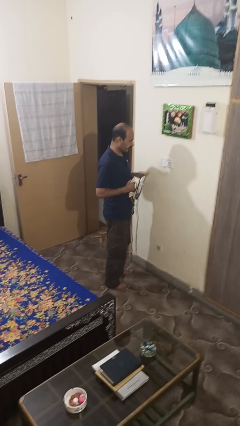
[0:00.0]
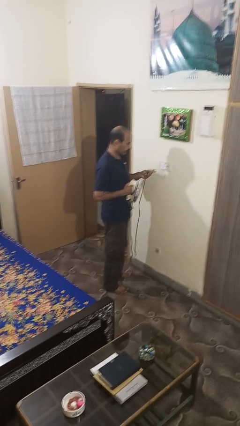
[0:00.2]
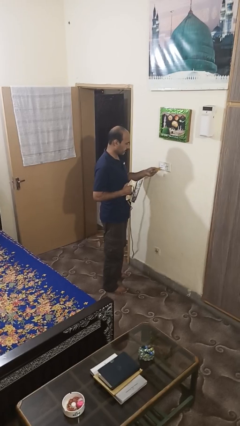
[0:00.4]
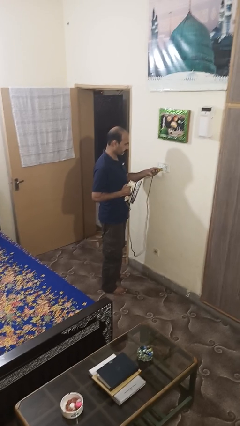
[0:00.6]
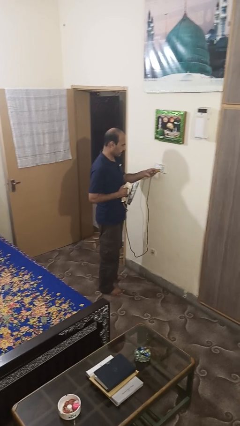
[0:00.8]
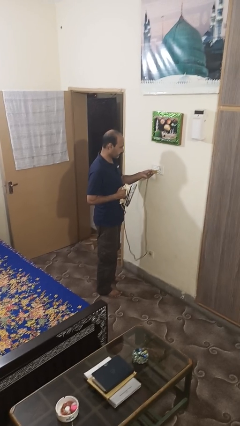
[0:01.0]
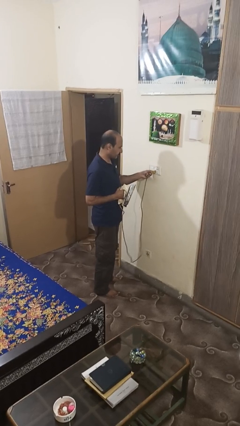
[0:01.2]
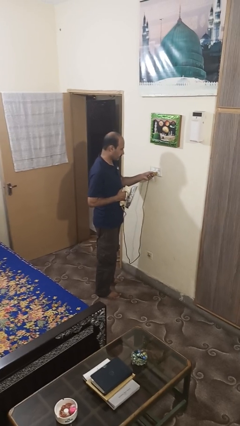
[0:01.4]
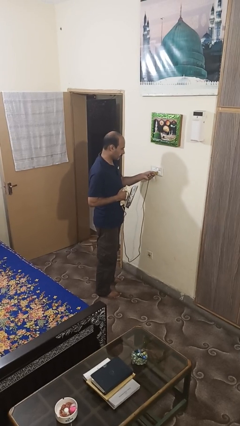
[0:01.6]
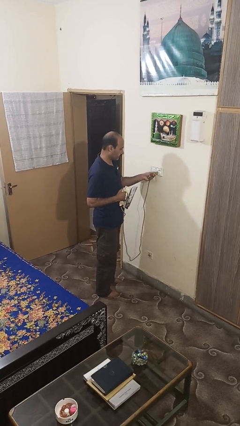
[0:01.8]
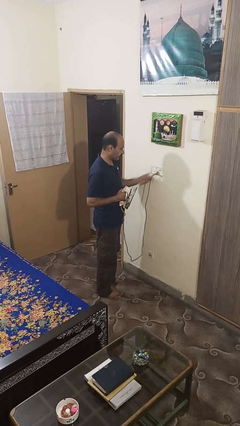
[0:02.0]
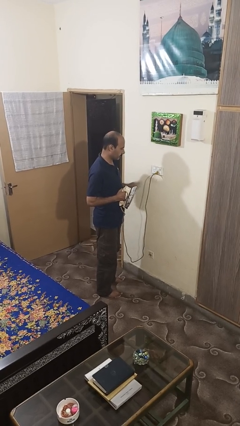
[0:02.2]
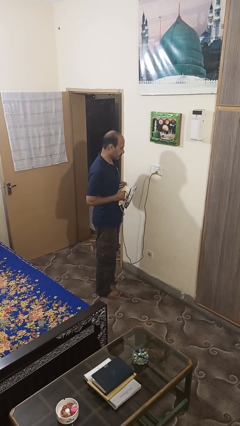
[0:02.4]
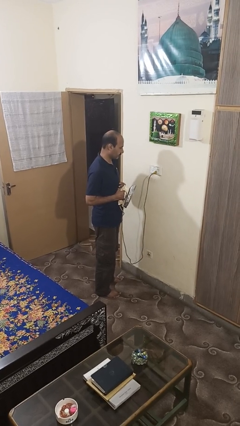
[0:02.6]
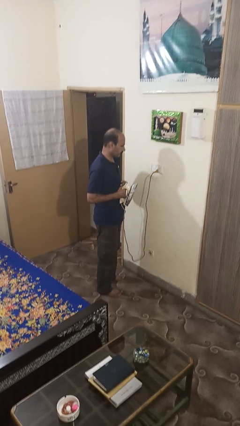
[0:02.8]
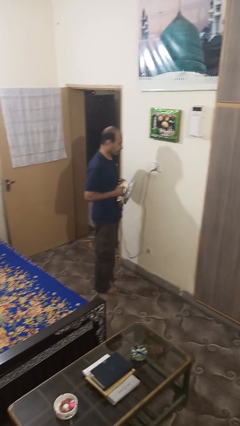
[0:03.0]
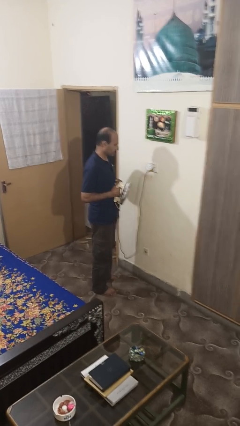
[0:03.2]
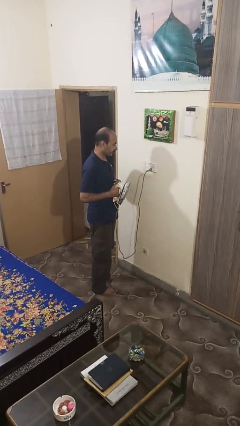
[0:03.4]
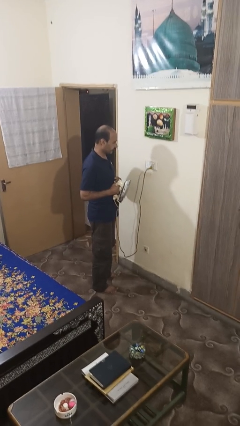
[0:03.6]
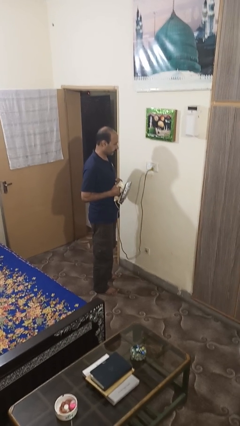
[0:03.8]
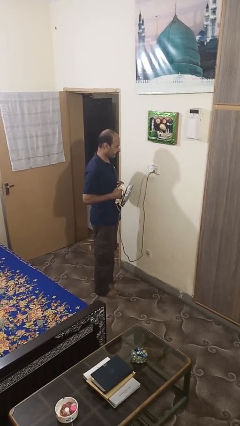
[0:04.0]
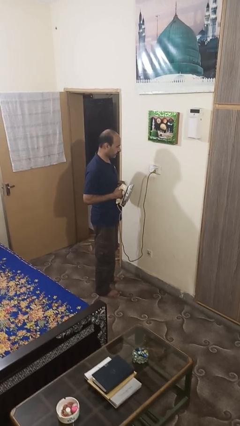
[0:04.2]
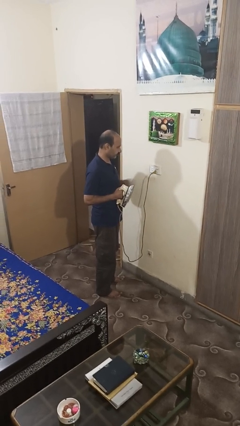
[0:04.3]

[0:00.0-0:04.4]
person plugs into electrical socket

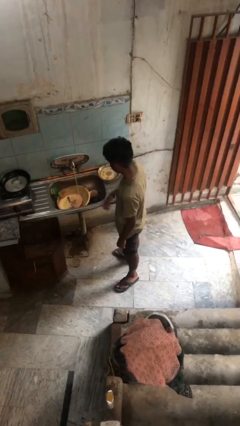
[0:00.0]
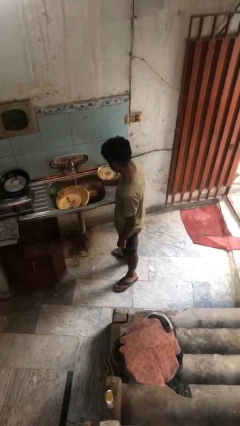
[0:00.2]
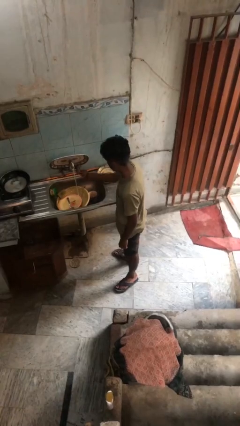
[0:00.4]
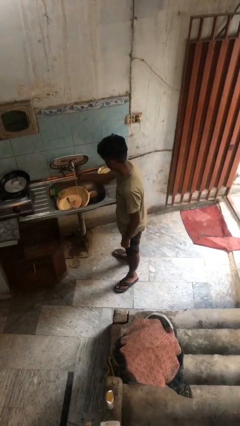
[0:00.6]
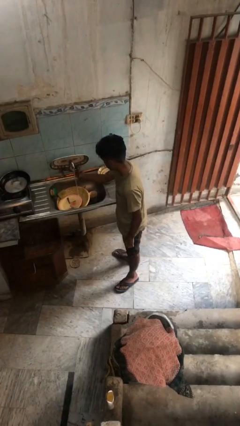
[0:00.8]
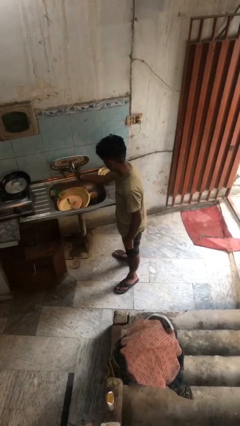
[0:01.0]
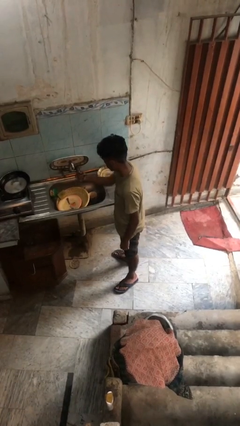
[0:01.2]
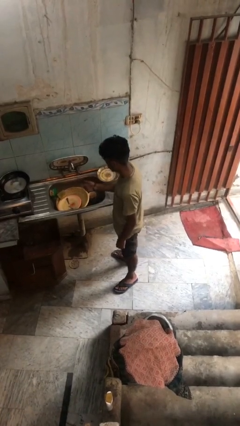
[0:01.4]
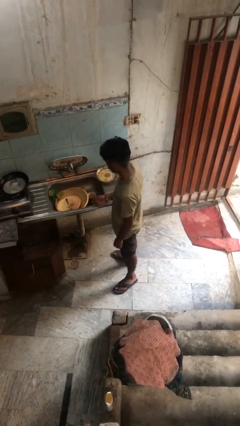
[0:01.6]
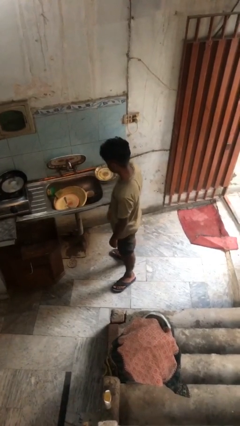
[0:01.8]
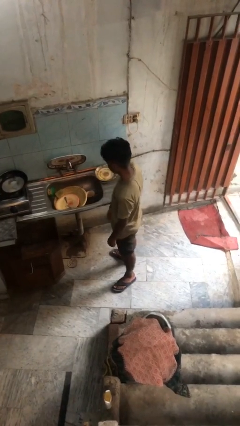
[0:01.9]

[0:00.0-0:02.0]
person turns off faucet

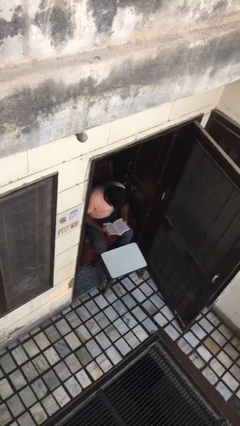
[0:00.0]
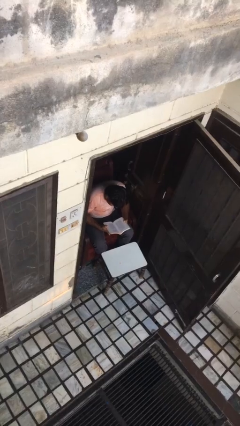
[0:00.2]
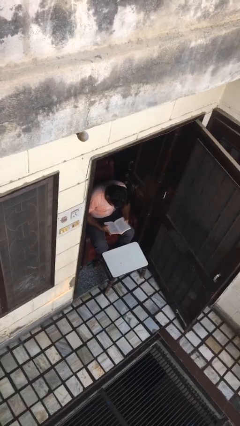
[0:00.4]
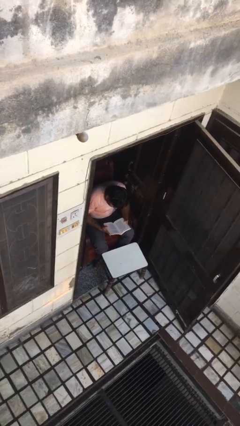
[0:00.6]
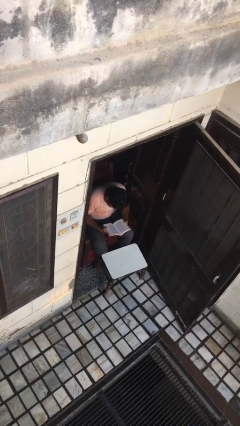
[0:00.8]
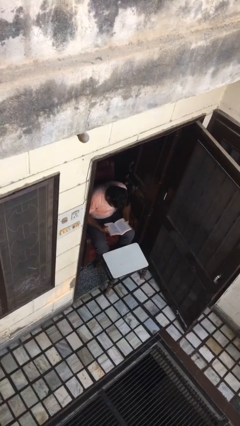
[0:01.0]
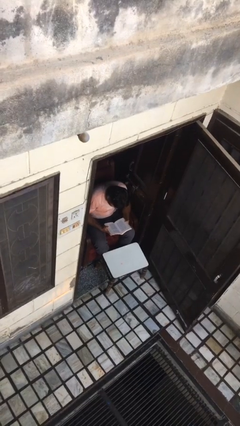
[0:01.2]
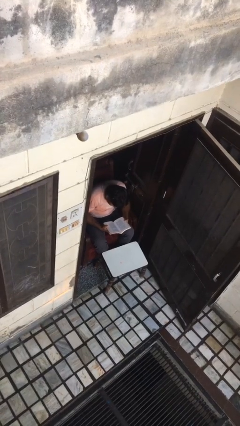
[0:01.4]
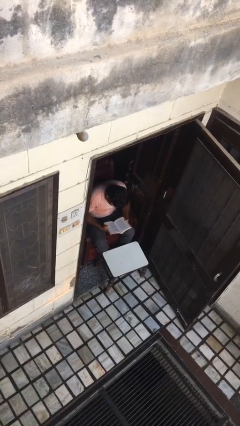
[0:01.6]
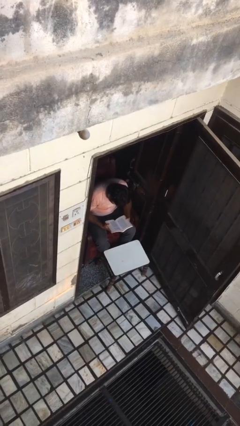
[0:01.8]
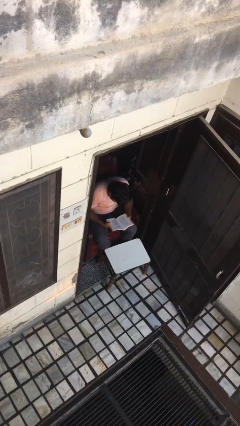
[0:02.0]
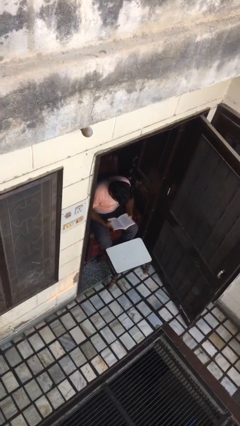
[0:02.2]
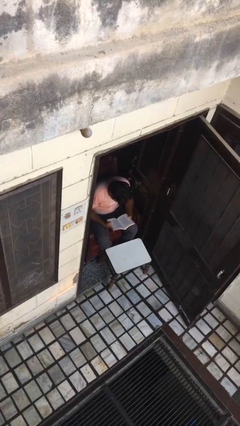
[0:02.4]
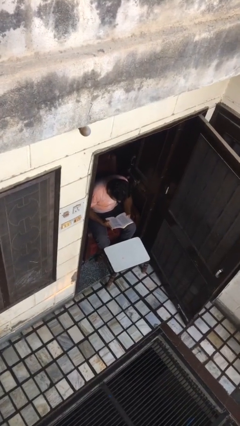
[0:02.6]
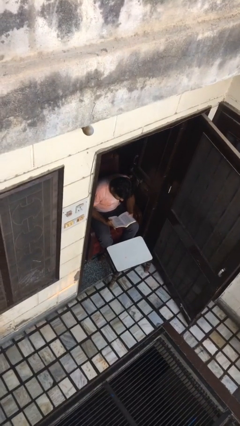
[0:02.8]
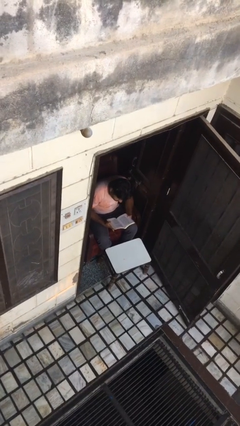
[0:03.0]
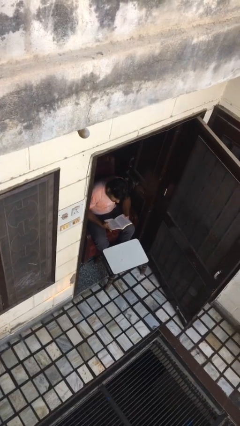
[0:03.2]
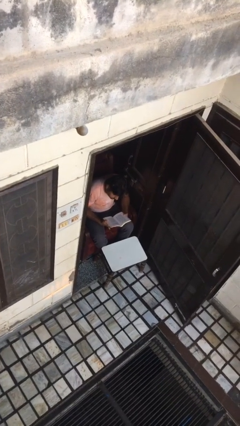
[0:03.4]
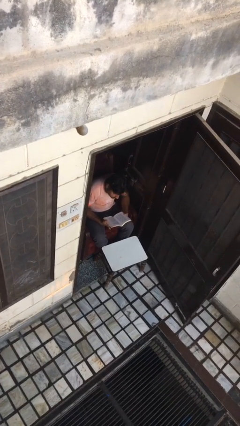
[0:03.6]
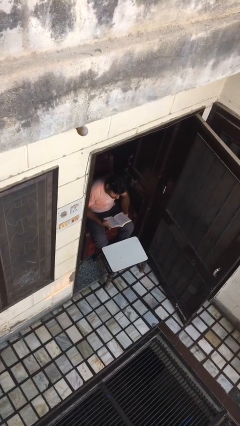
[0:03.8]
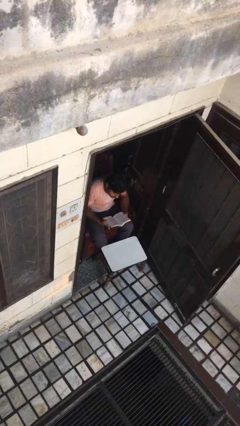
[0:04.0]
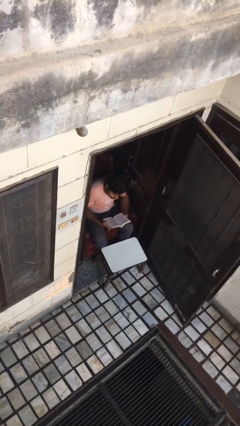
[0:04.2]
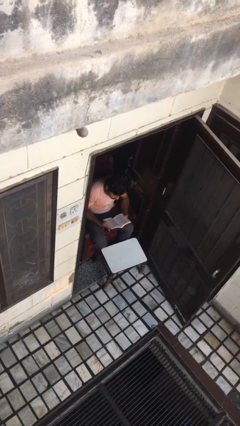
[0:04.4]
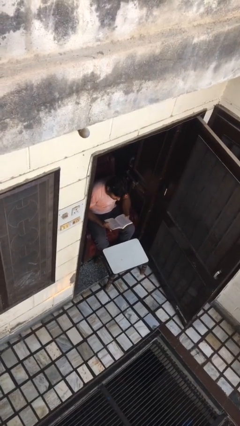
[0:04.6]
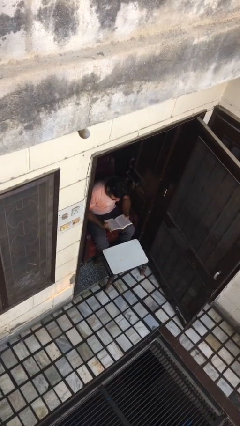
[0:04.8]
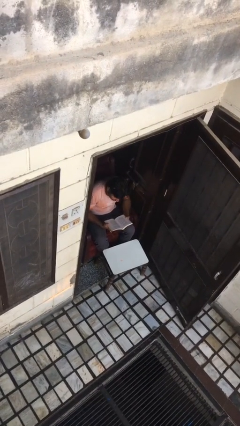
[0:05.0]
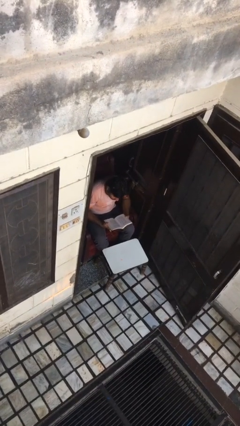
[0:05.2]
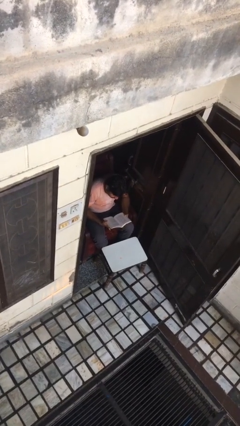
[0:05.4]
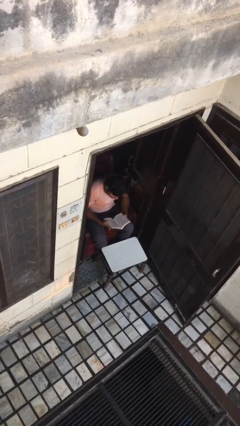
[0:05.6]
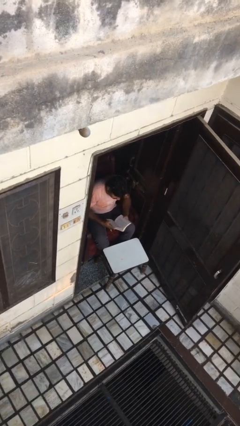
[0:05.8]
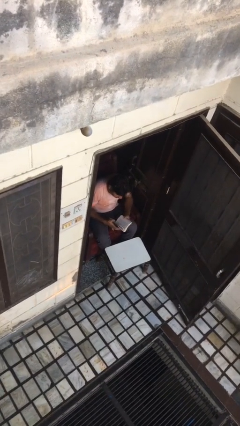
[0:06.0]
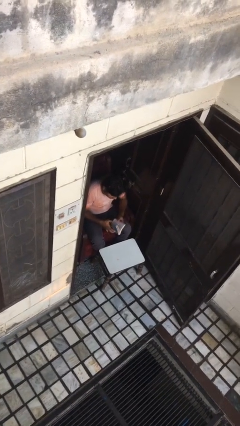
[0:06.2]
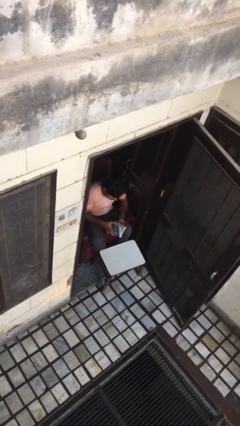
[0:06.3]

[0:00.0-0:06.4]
person reads document

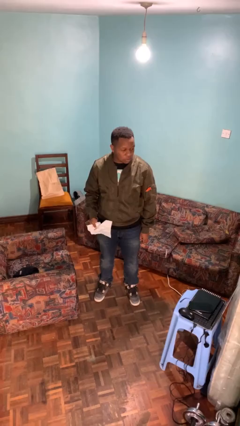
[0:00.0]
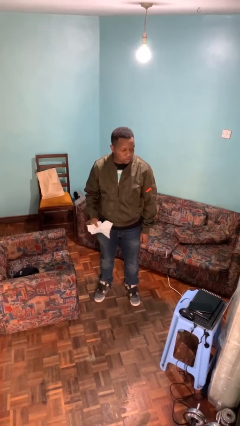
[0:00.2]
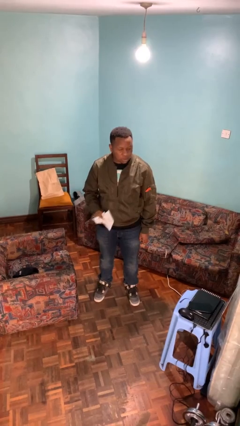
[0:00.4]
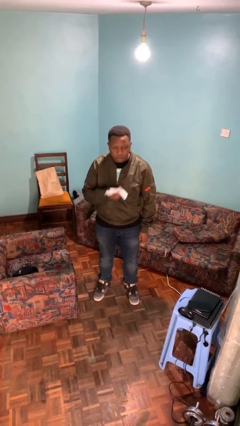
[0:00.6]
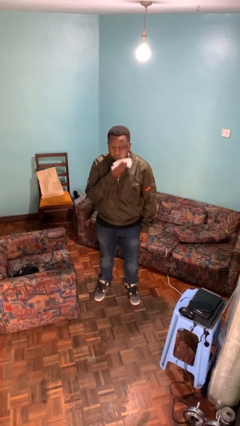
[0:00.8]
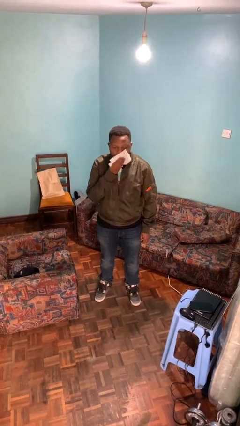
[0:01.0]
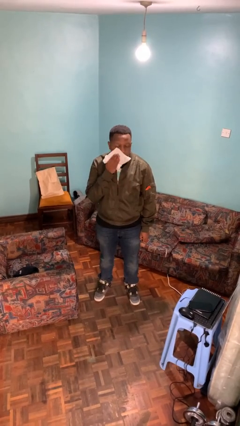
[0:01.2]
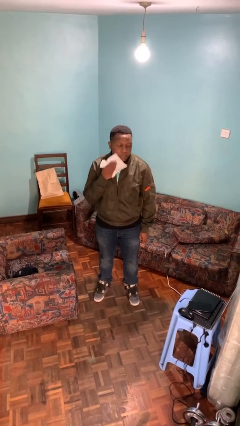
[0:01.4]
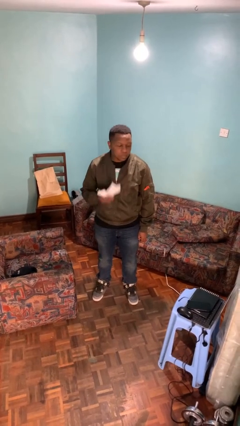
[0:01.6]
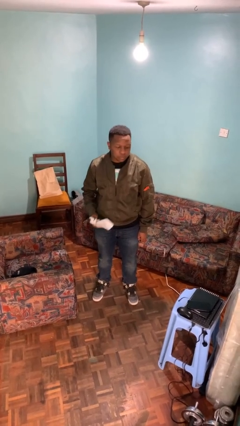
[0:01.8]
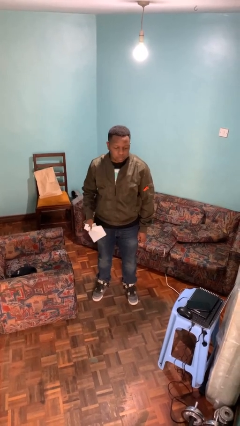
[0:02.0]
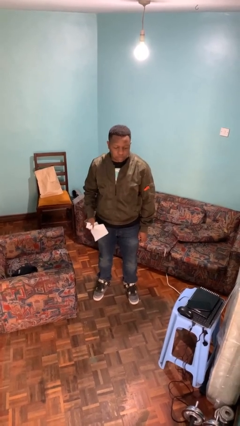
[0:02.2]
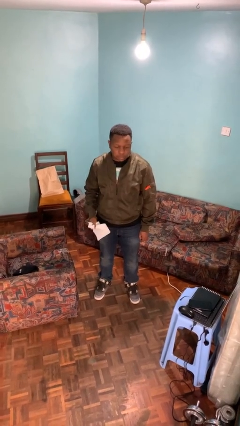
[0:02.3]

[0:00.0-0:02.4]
person wipes mouth with napkin

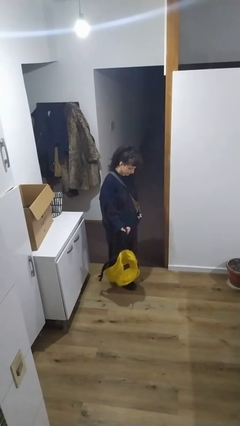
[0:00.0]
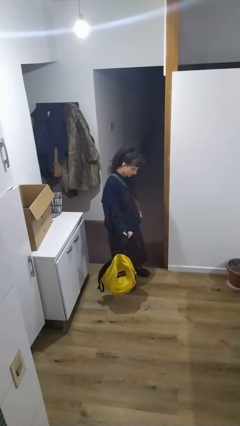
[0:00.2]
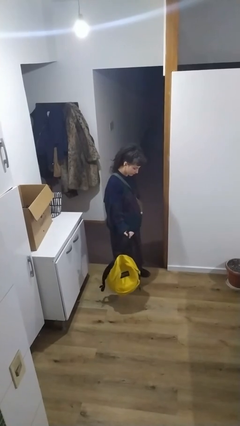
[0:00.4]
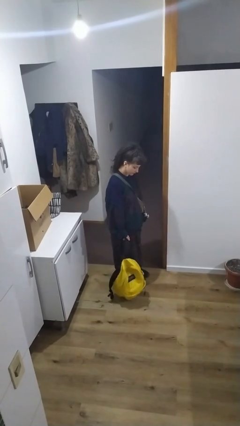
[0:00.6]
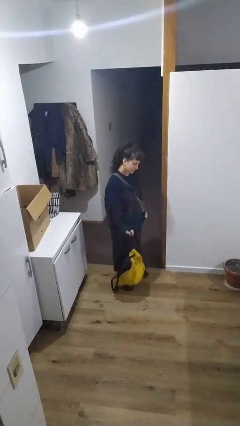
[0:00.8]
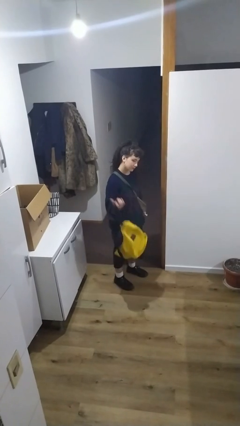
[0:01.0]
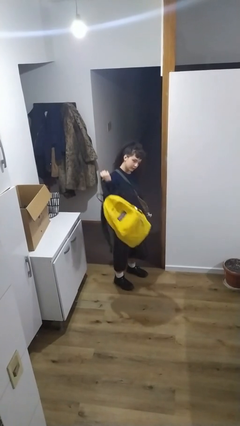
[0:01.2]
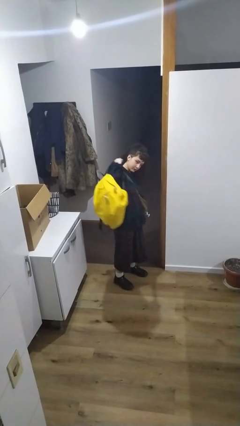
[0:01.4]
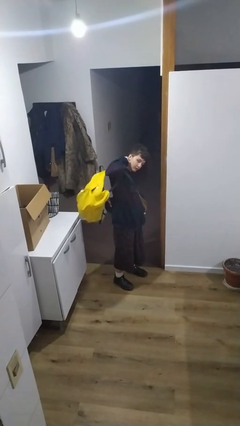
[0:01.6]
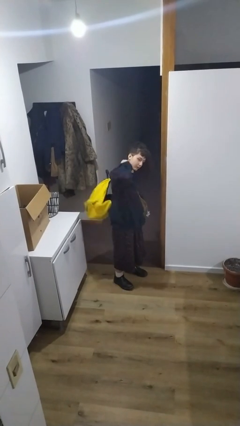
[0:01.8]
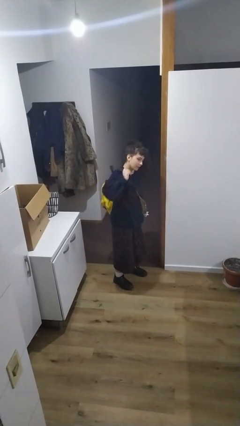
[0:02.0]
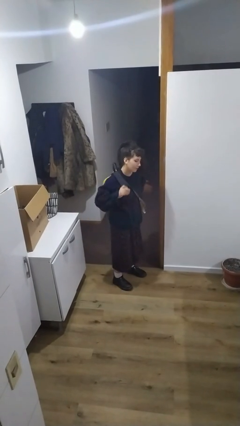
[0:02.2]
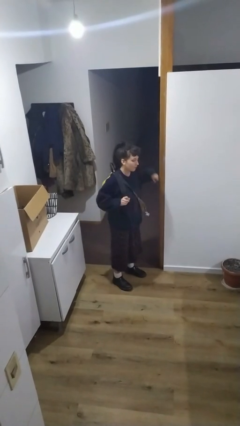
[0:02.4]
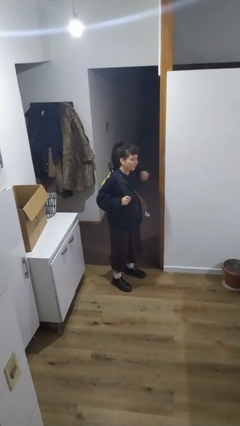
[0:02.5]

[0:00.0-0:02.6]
person puts on backpack
